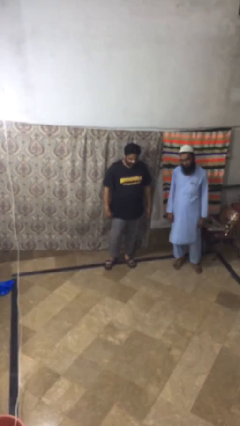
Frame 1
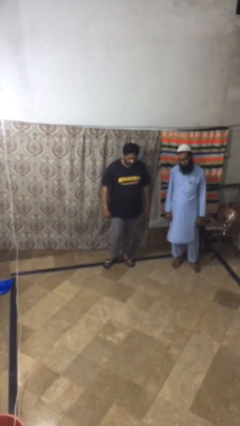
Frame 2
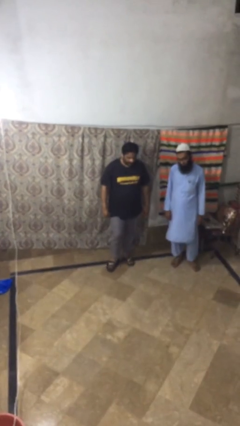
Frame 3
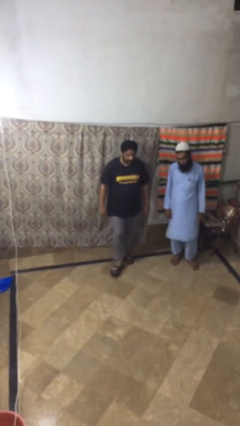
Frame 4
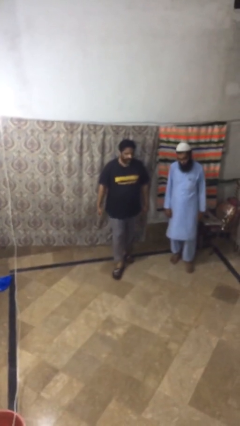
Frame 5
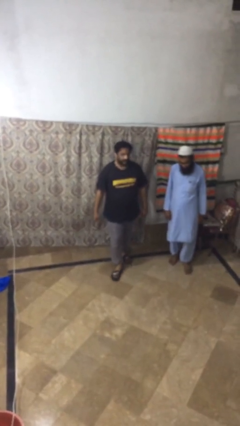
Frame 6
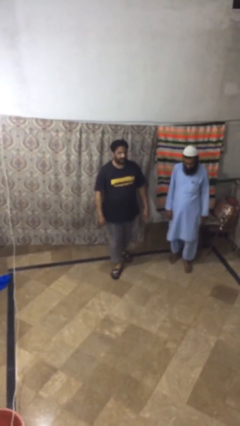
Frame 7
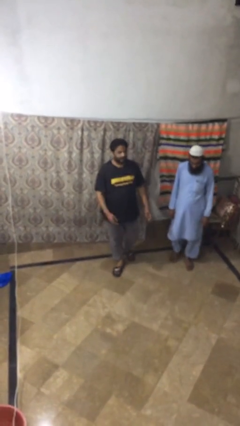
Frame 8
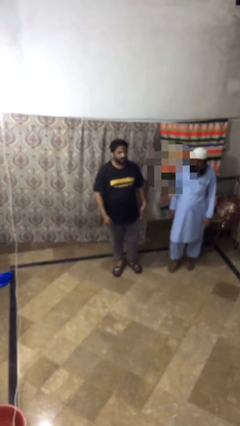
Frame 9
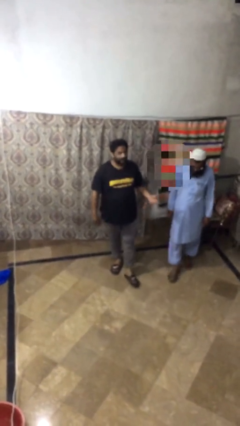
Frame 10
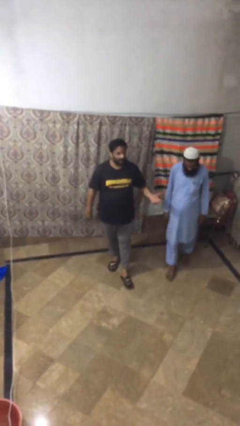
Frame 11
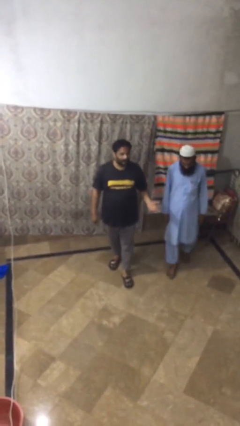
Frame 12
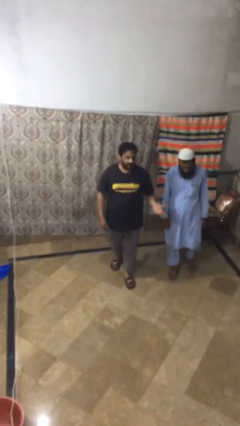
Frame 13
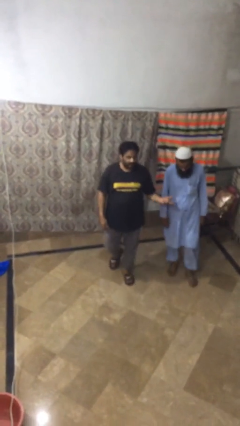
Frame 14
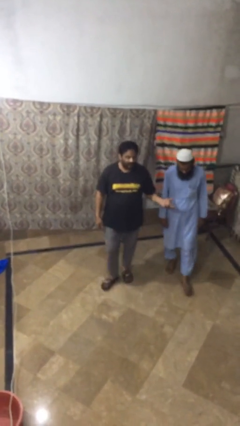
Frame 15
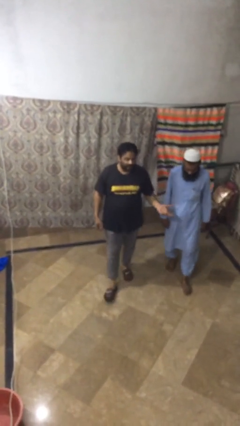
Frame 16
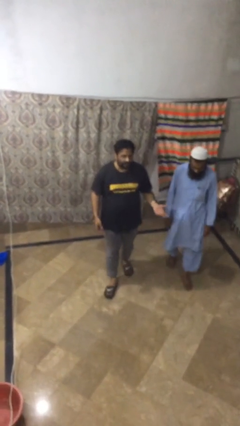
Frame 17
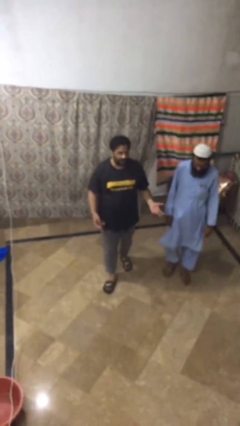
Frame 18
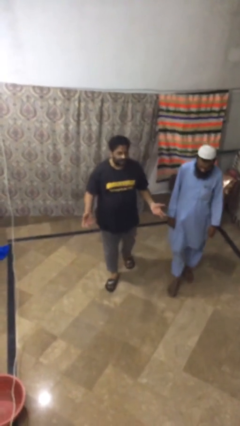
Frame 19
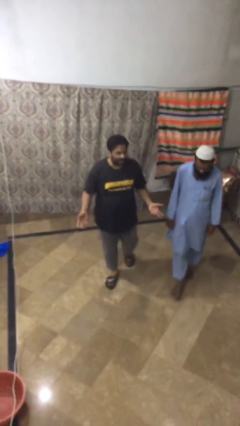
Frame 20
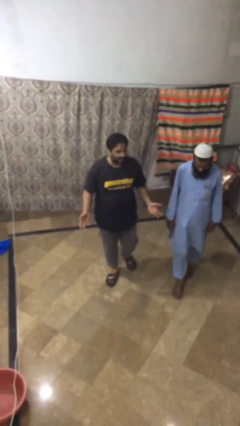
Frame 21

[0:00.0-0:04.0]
person talks to person

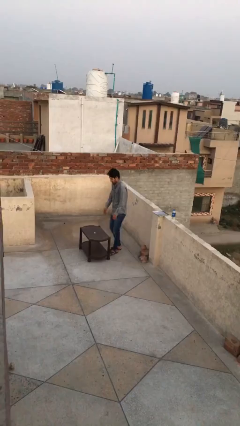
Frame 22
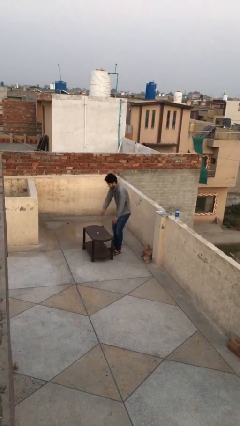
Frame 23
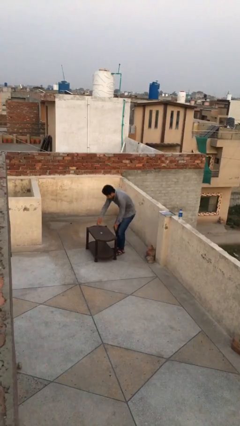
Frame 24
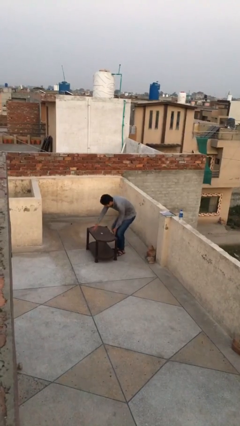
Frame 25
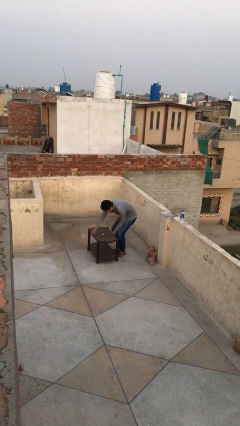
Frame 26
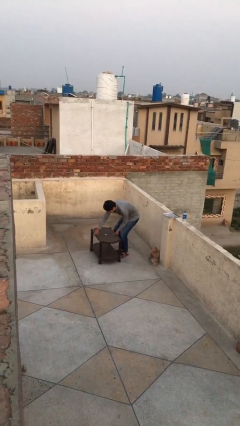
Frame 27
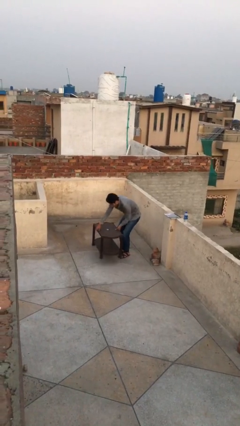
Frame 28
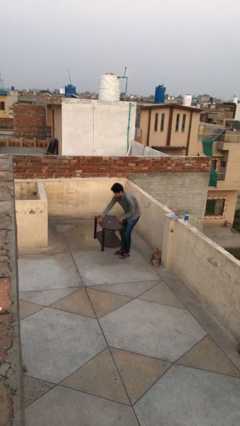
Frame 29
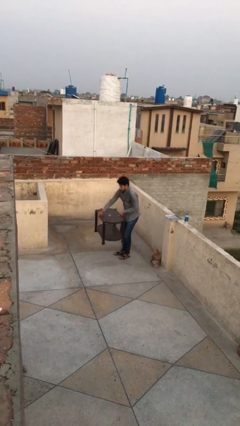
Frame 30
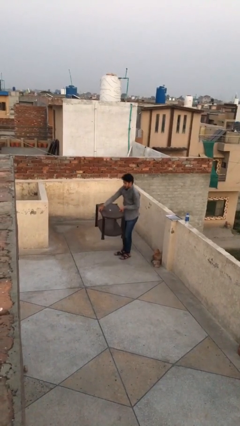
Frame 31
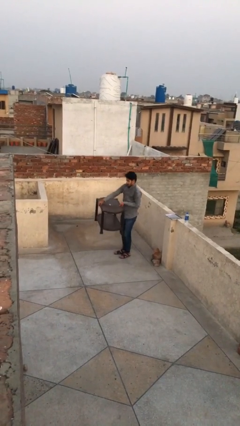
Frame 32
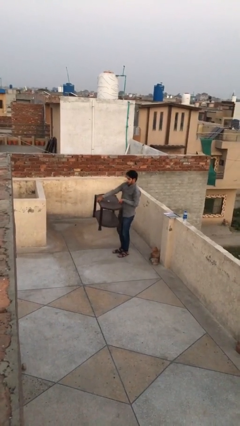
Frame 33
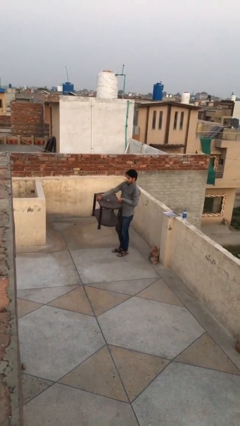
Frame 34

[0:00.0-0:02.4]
person picks up object from floor

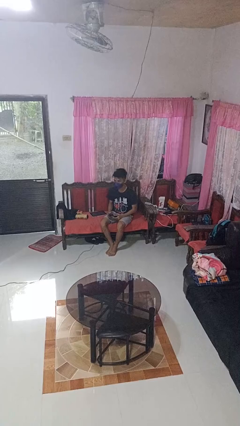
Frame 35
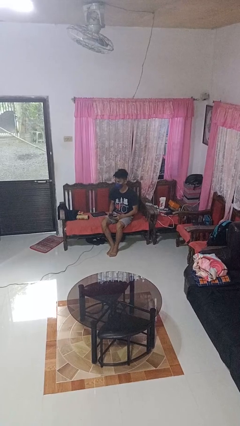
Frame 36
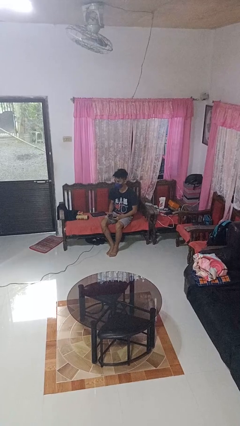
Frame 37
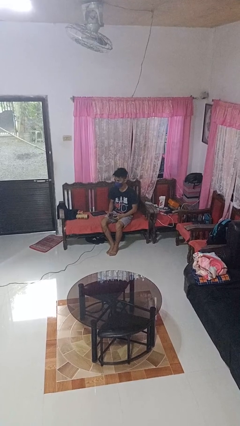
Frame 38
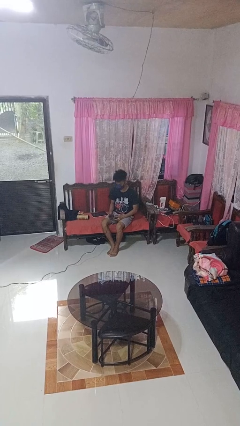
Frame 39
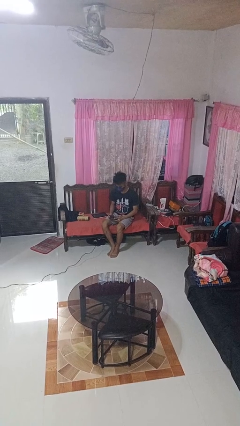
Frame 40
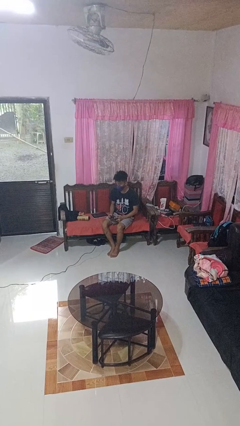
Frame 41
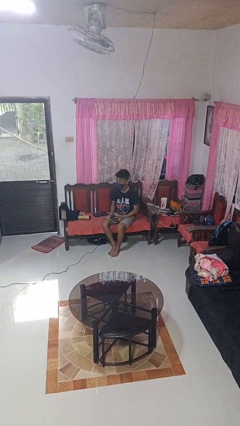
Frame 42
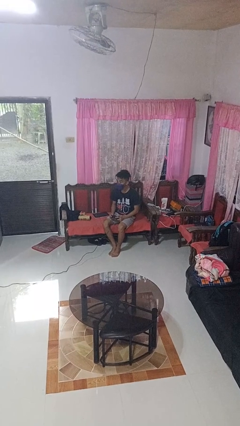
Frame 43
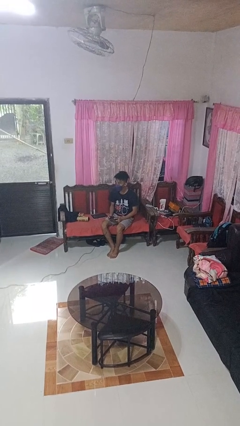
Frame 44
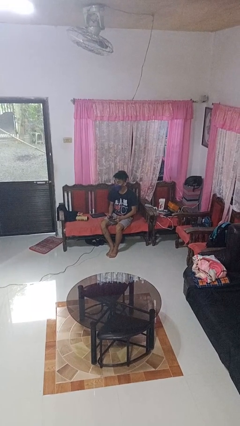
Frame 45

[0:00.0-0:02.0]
person interacts with handheld game

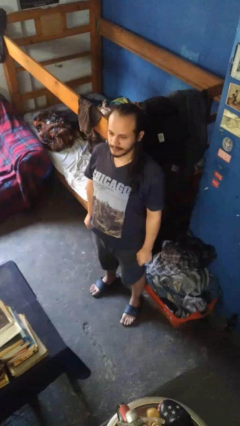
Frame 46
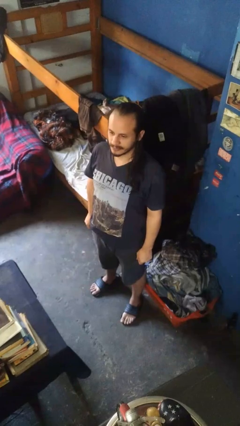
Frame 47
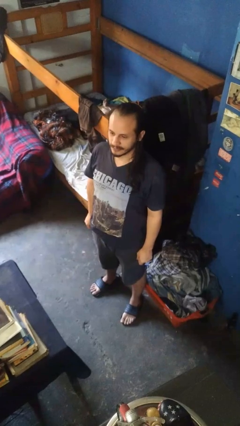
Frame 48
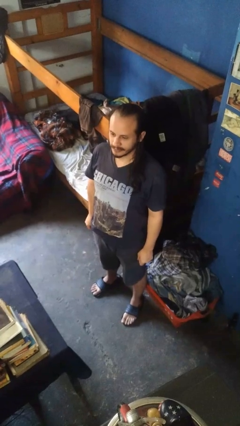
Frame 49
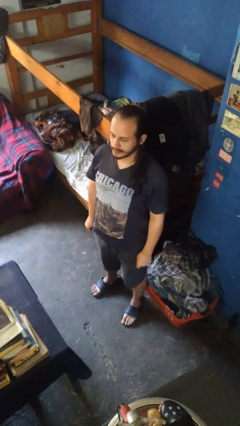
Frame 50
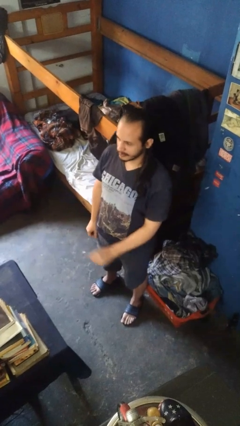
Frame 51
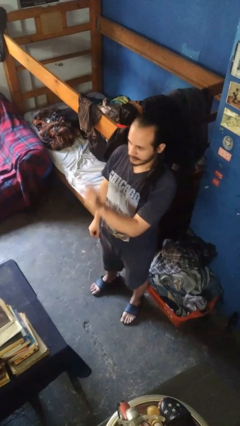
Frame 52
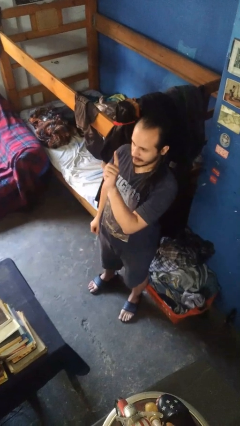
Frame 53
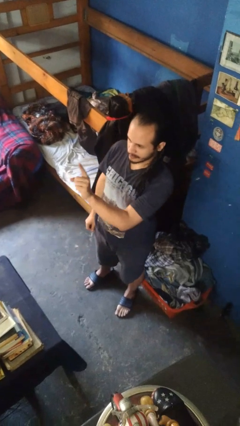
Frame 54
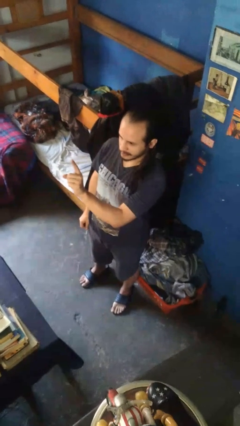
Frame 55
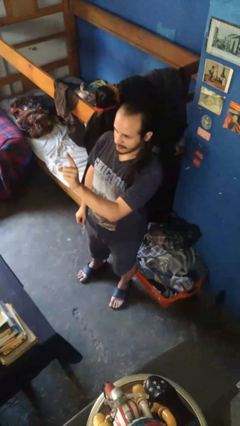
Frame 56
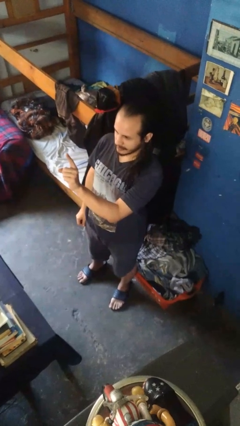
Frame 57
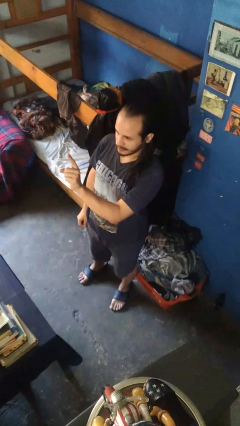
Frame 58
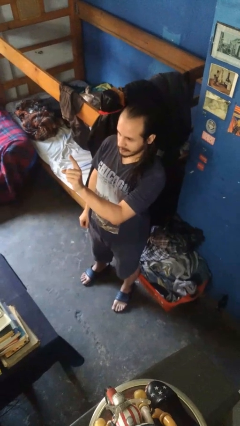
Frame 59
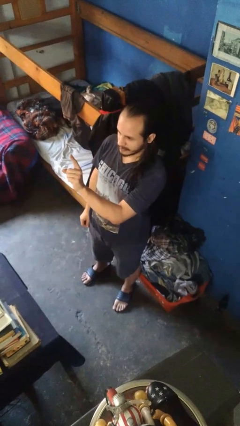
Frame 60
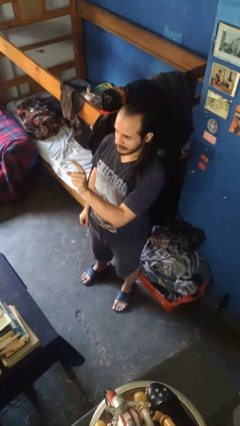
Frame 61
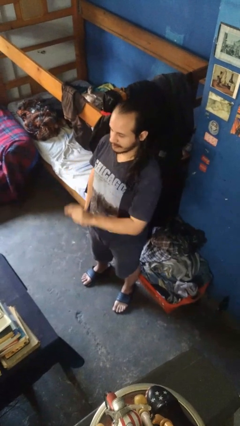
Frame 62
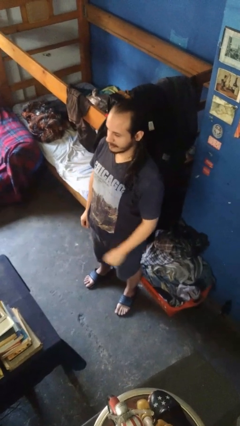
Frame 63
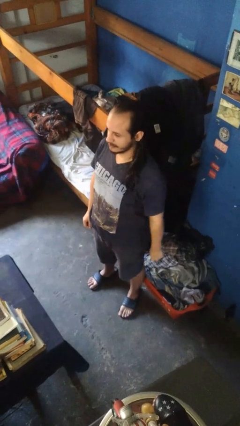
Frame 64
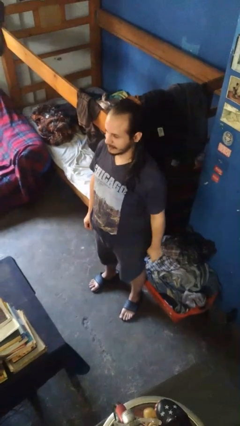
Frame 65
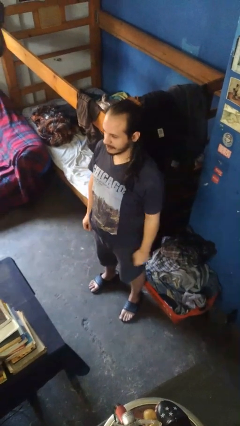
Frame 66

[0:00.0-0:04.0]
person gestures number one

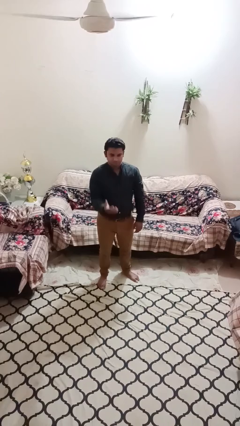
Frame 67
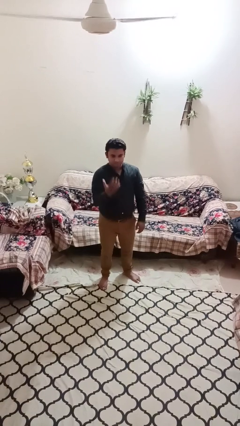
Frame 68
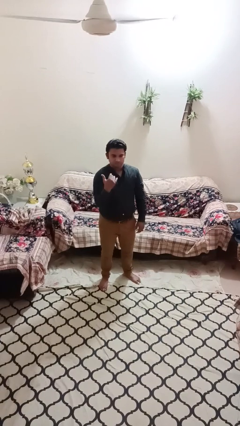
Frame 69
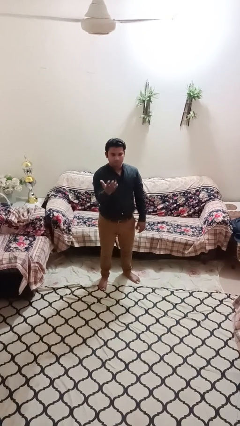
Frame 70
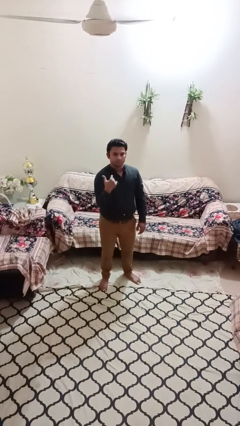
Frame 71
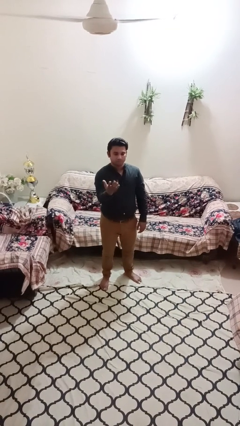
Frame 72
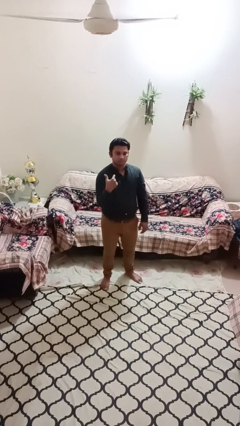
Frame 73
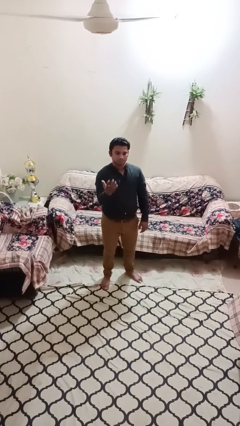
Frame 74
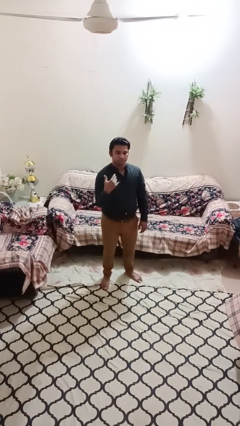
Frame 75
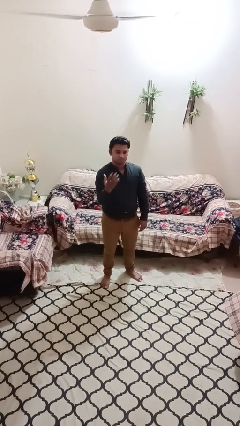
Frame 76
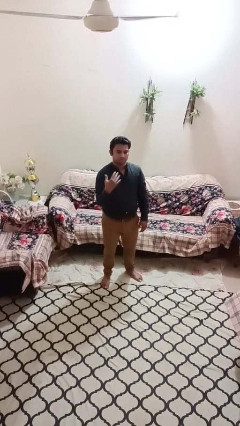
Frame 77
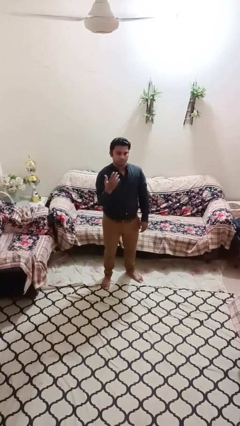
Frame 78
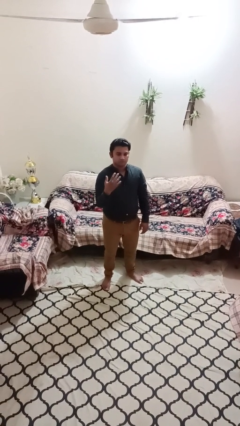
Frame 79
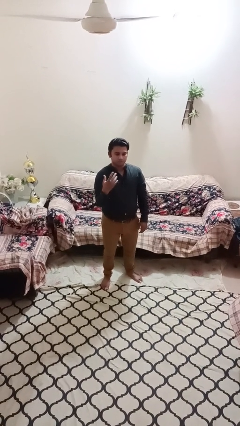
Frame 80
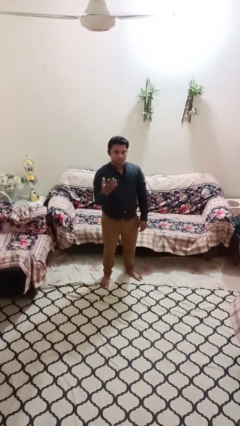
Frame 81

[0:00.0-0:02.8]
person gestures come here

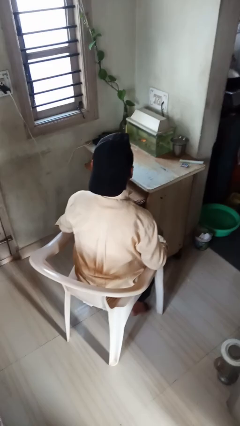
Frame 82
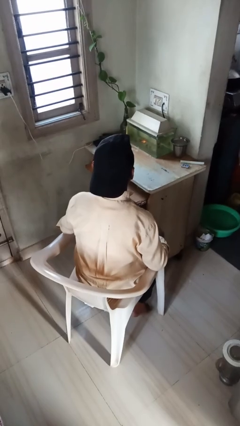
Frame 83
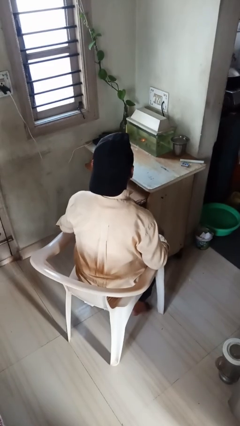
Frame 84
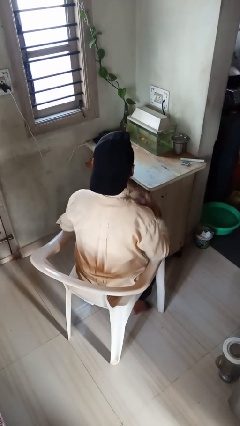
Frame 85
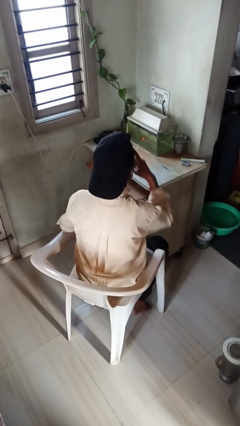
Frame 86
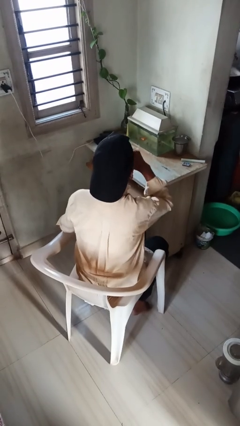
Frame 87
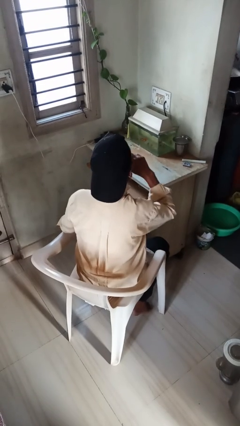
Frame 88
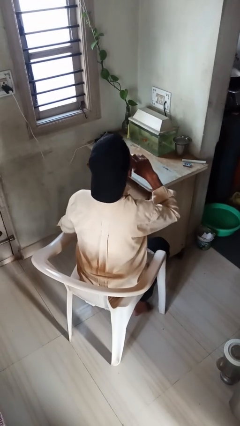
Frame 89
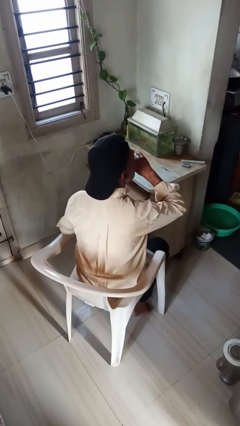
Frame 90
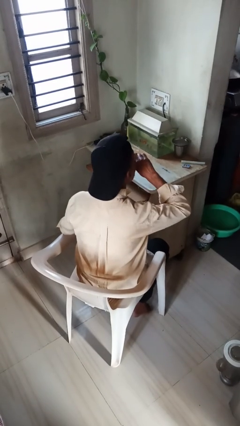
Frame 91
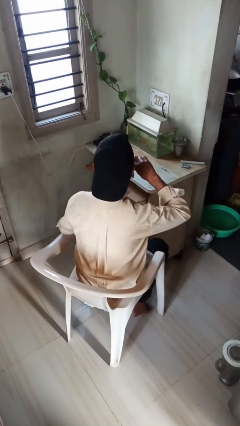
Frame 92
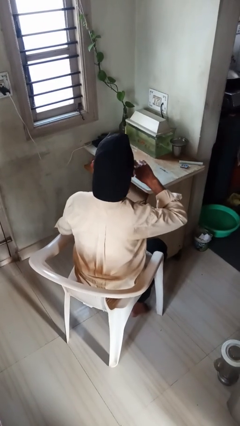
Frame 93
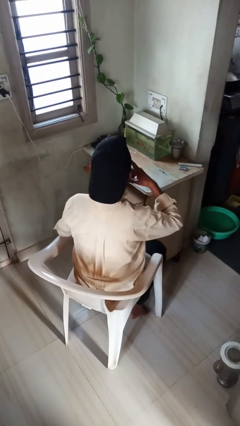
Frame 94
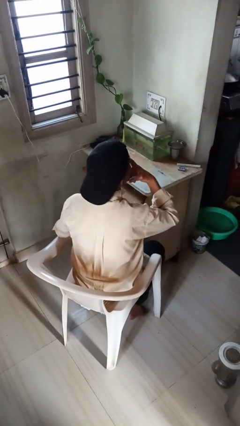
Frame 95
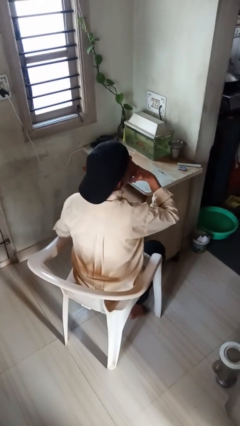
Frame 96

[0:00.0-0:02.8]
person licks fingers
